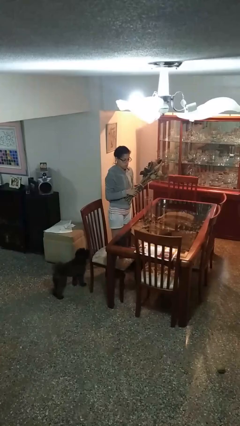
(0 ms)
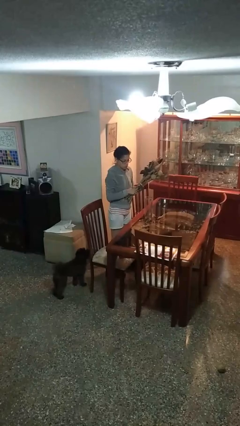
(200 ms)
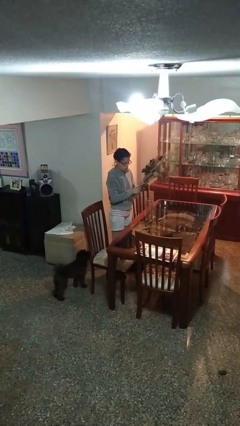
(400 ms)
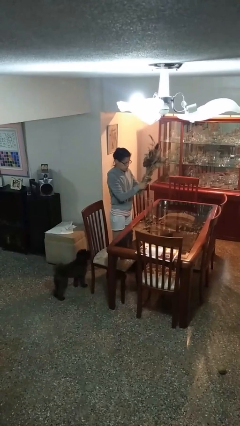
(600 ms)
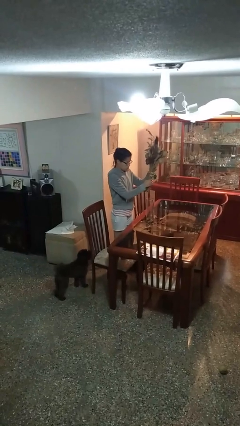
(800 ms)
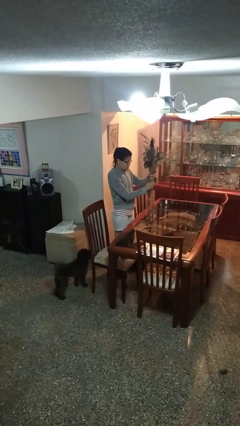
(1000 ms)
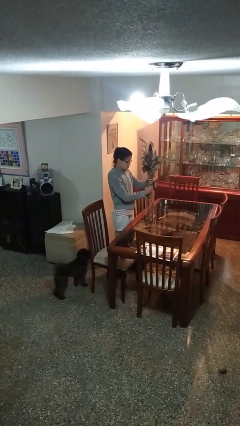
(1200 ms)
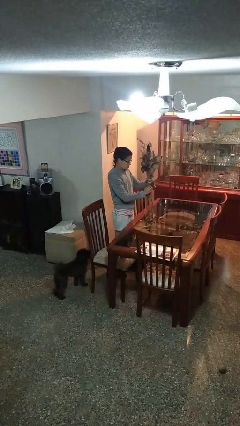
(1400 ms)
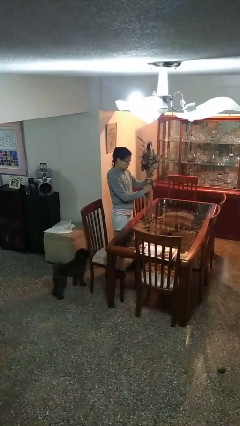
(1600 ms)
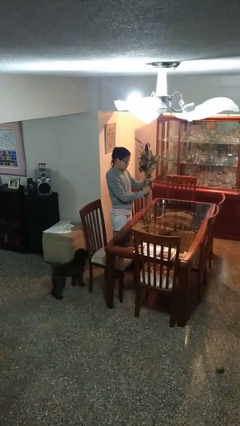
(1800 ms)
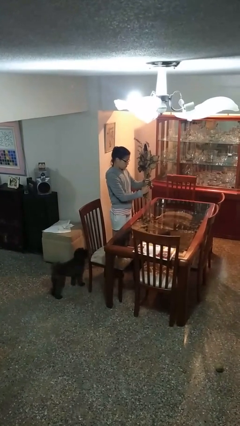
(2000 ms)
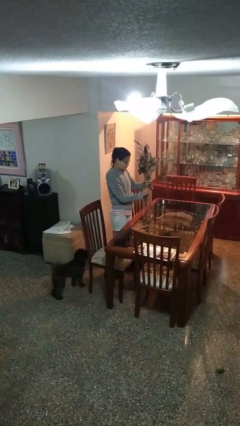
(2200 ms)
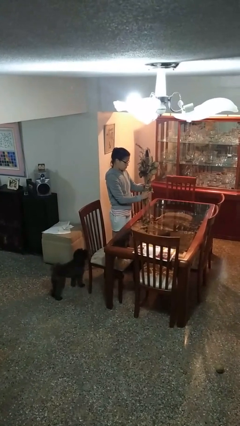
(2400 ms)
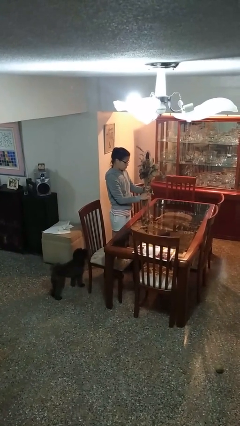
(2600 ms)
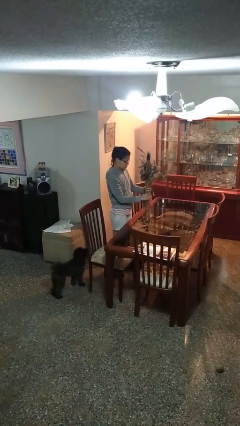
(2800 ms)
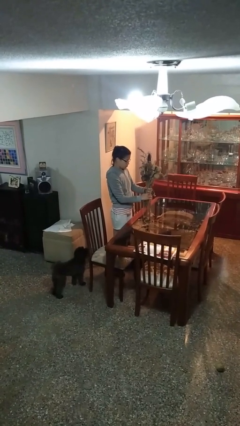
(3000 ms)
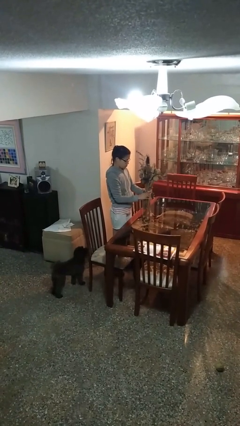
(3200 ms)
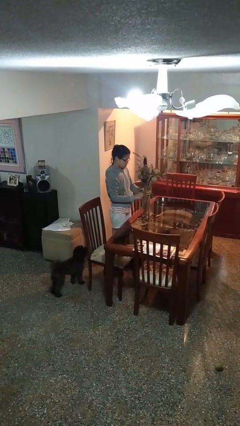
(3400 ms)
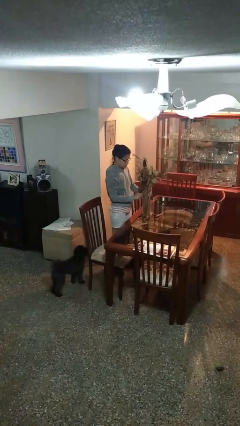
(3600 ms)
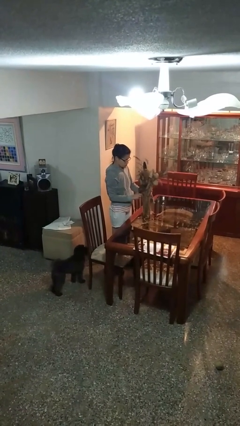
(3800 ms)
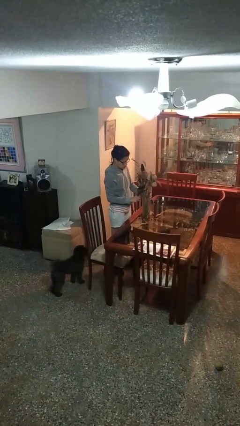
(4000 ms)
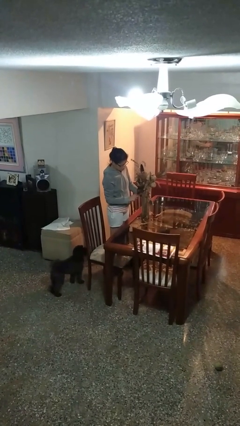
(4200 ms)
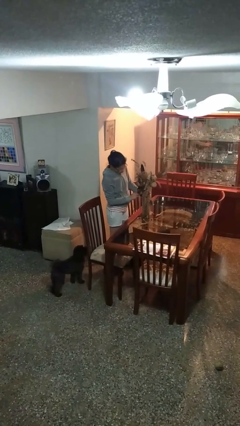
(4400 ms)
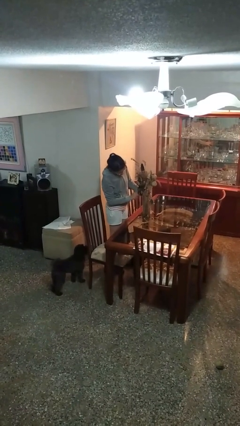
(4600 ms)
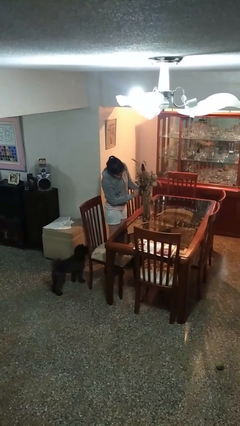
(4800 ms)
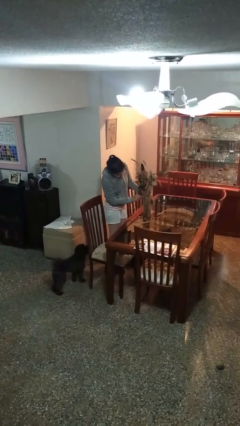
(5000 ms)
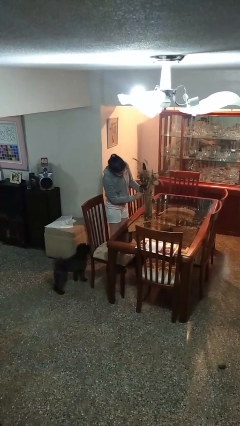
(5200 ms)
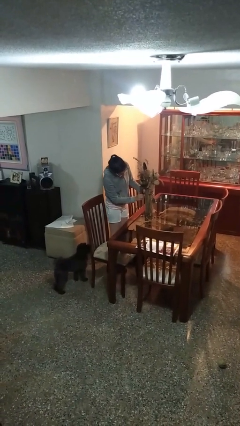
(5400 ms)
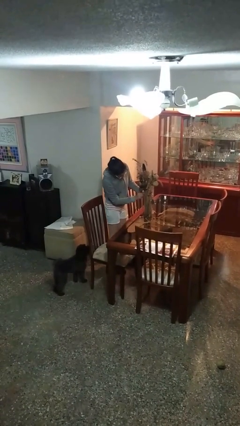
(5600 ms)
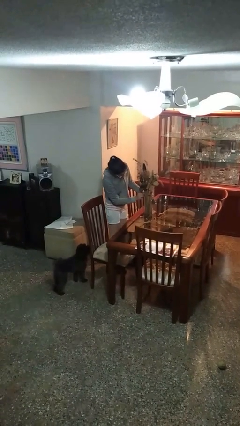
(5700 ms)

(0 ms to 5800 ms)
person arranges flowers in vase

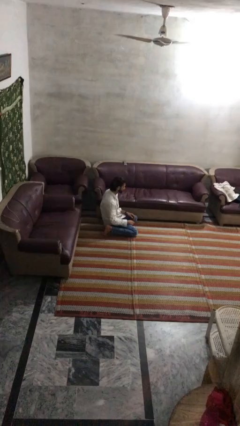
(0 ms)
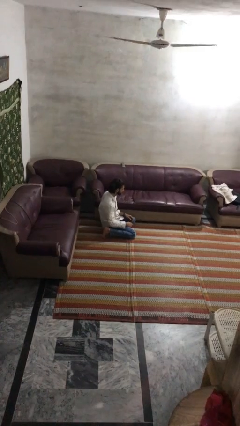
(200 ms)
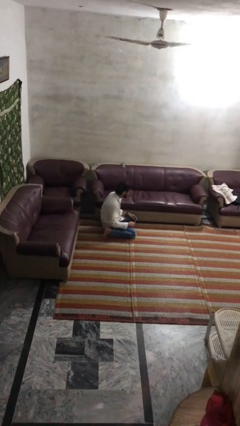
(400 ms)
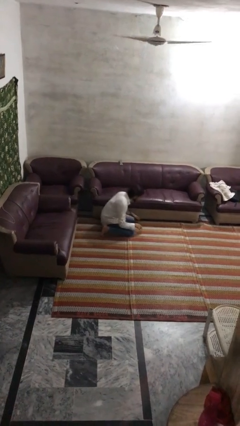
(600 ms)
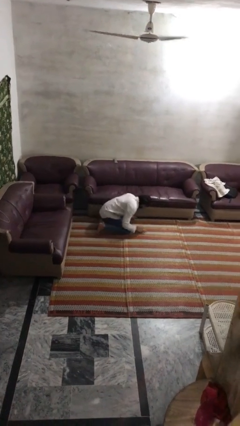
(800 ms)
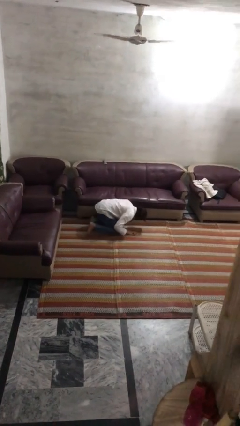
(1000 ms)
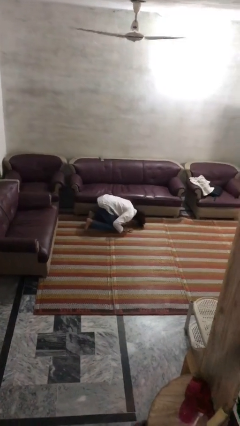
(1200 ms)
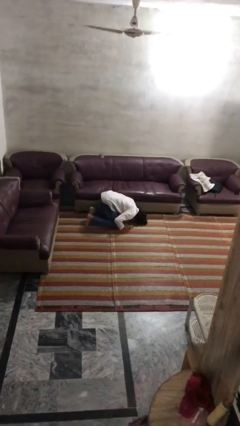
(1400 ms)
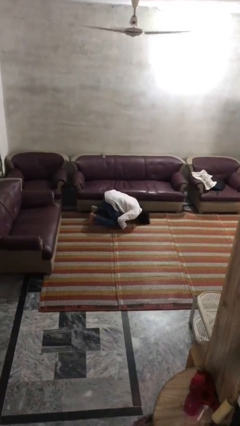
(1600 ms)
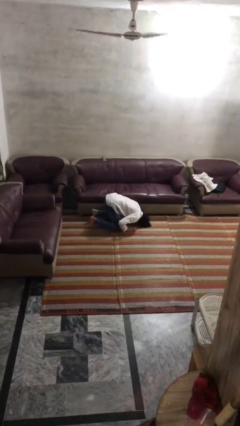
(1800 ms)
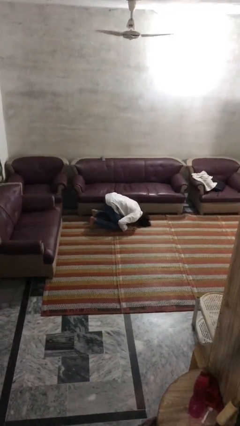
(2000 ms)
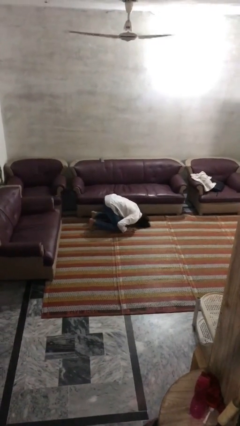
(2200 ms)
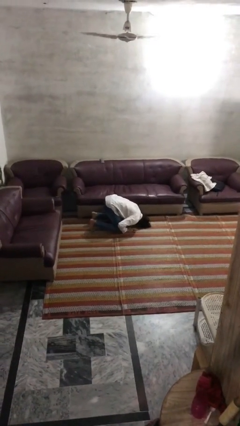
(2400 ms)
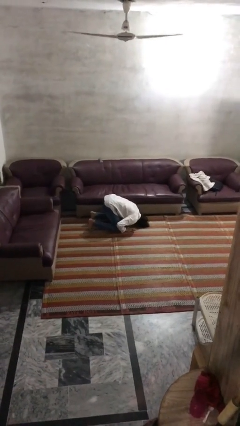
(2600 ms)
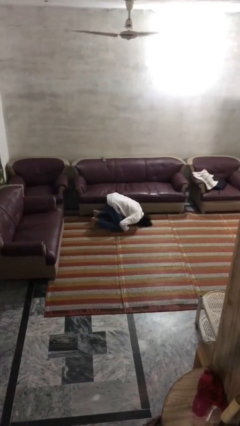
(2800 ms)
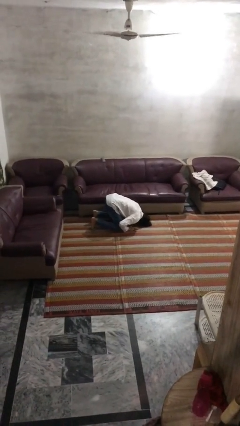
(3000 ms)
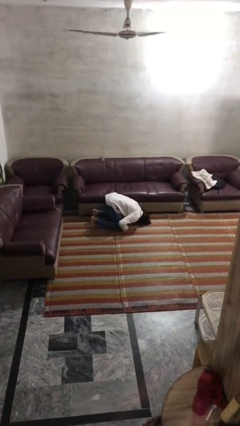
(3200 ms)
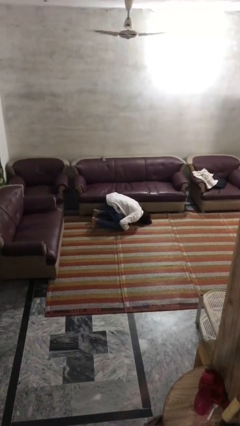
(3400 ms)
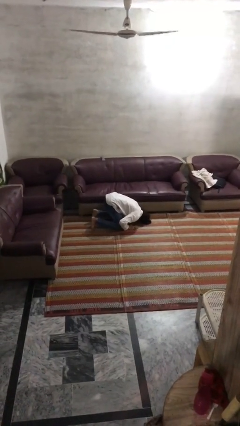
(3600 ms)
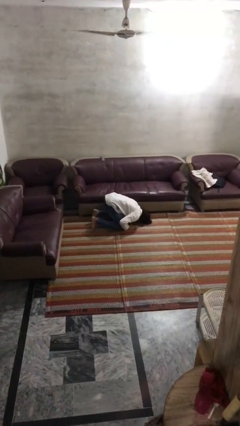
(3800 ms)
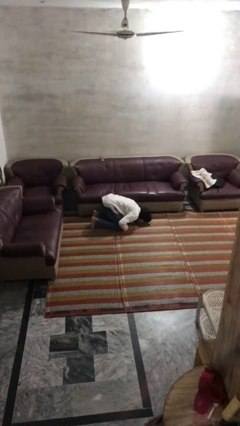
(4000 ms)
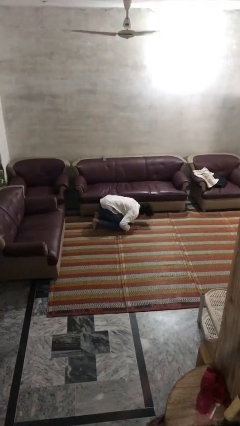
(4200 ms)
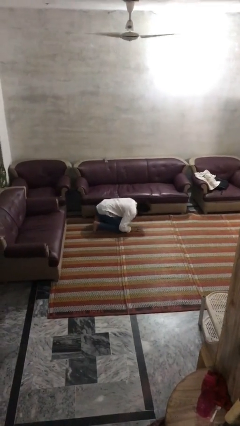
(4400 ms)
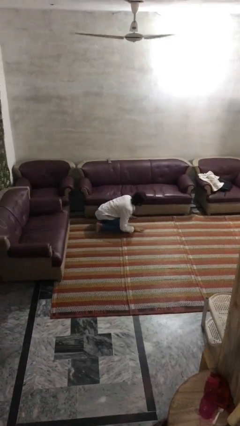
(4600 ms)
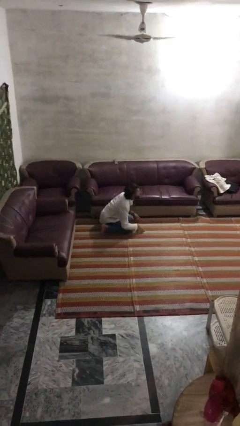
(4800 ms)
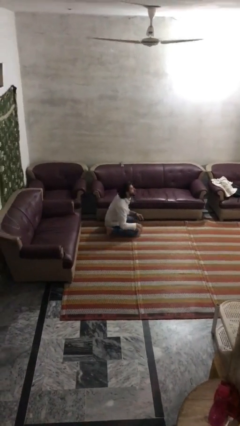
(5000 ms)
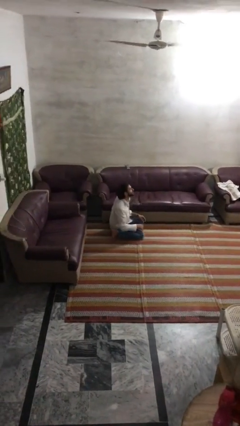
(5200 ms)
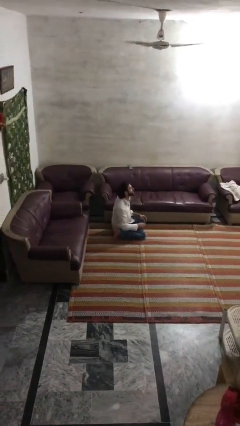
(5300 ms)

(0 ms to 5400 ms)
person searches under couch

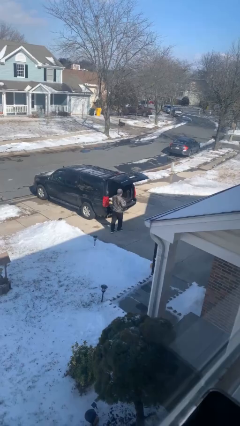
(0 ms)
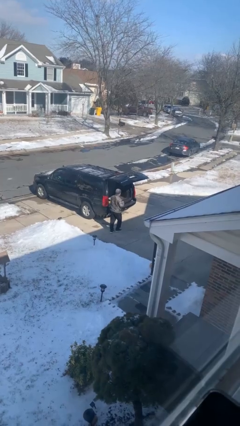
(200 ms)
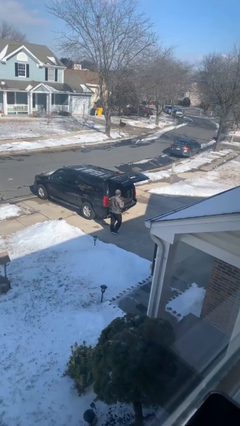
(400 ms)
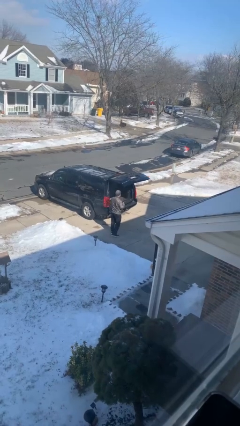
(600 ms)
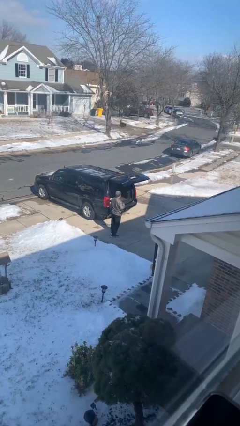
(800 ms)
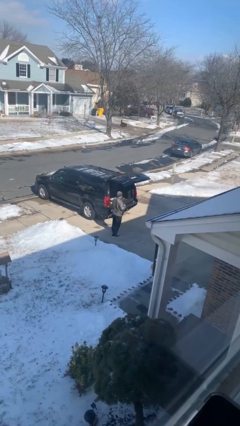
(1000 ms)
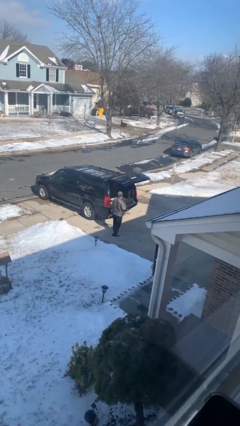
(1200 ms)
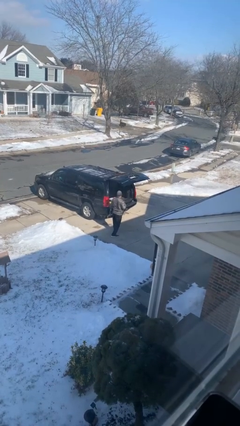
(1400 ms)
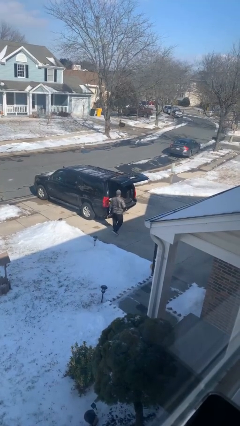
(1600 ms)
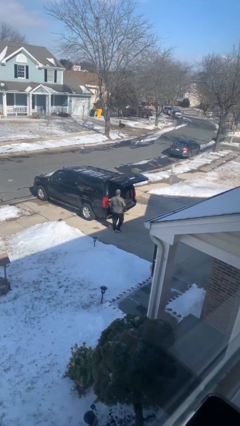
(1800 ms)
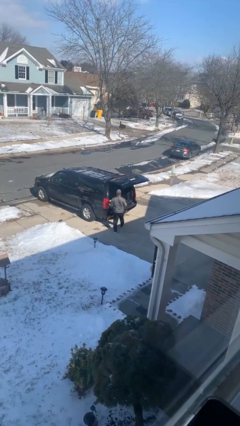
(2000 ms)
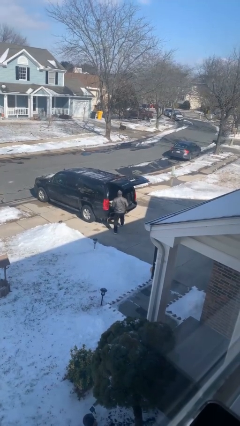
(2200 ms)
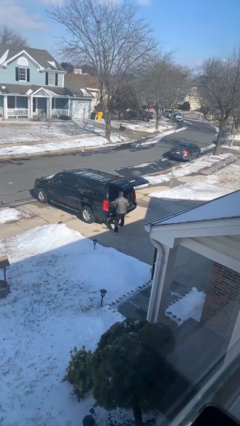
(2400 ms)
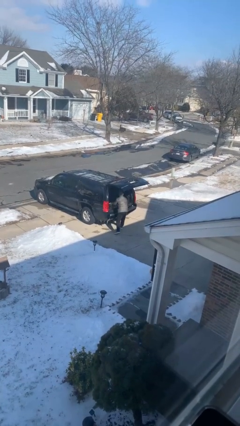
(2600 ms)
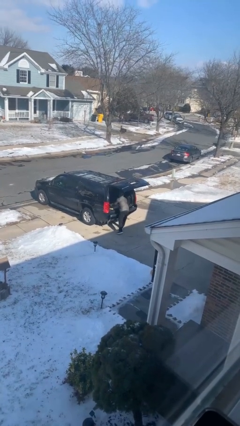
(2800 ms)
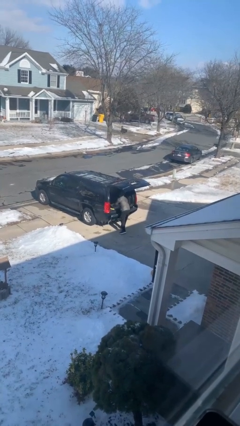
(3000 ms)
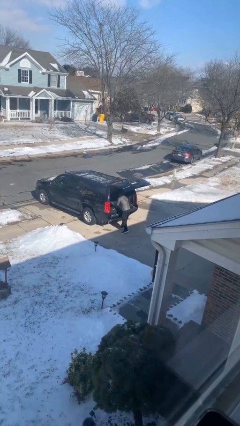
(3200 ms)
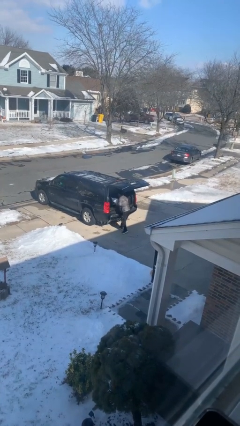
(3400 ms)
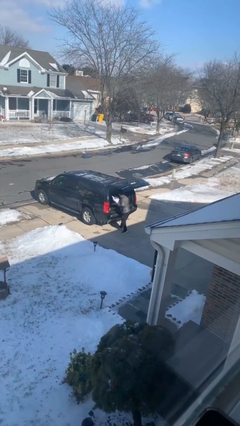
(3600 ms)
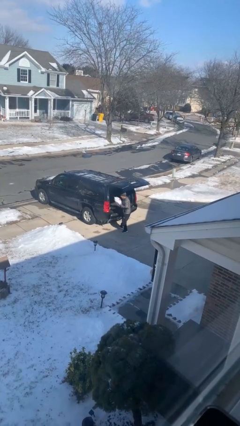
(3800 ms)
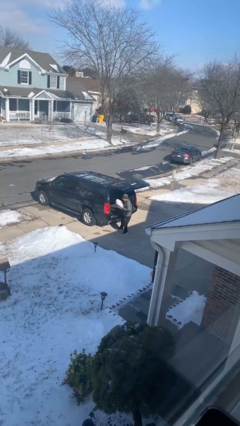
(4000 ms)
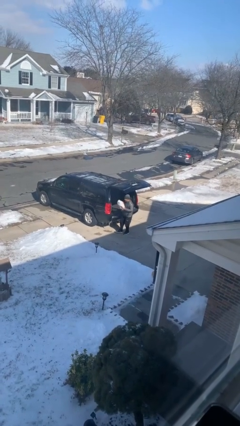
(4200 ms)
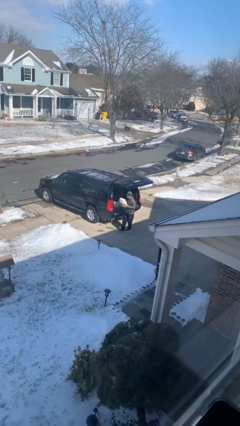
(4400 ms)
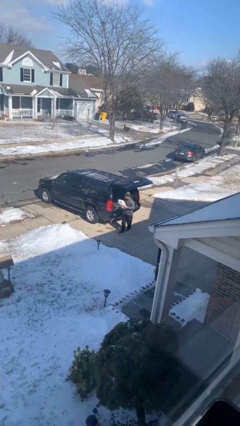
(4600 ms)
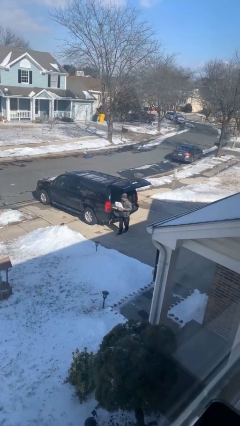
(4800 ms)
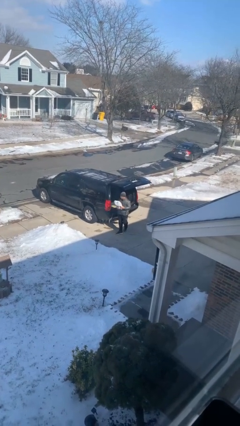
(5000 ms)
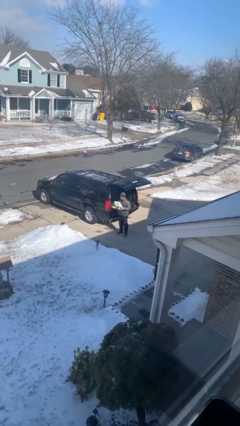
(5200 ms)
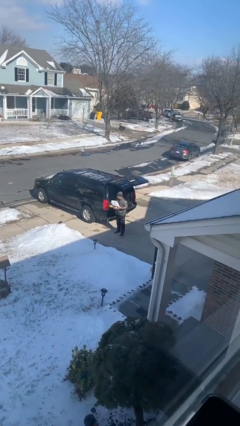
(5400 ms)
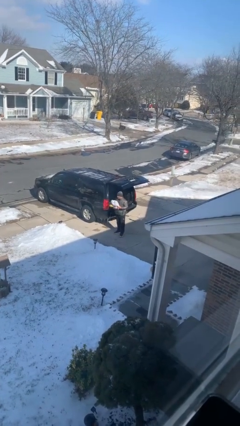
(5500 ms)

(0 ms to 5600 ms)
person unloads car

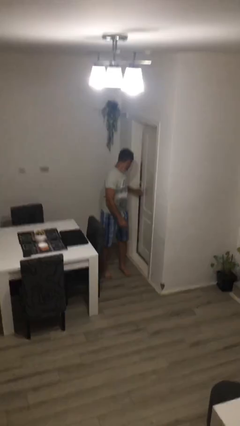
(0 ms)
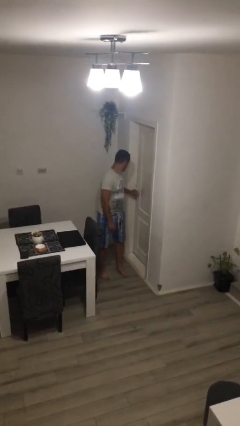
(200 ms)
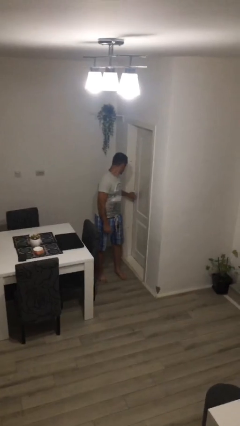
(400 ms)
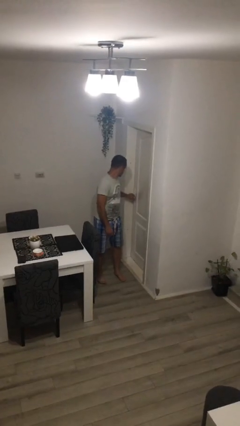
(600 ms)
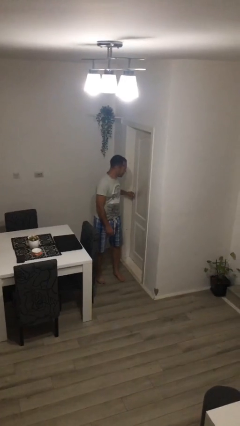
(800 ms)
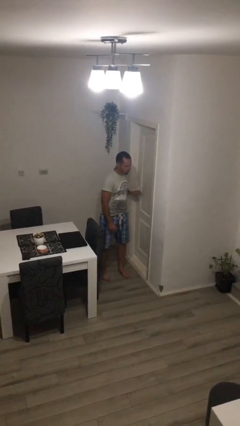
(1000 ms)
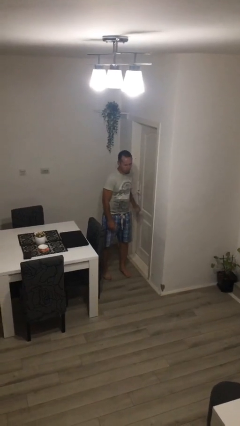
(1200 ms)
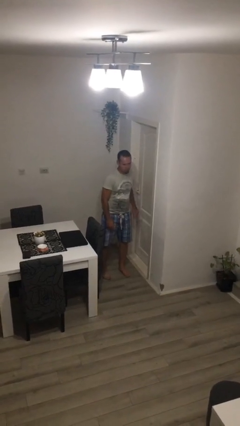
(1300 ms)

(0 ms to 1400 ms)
person closes facility door
